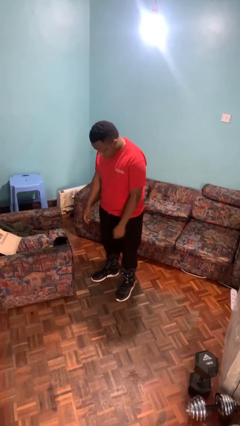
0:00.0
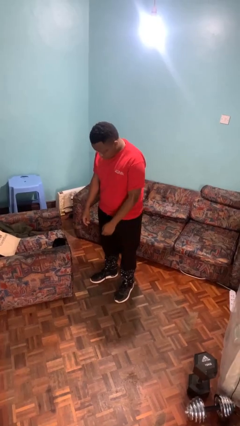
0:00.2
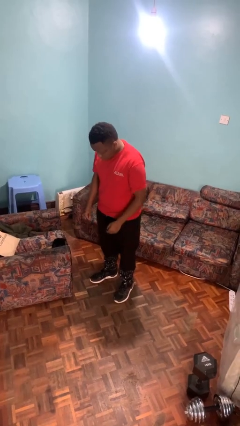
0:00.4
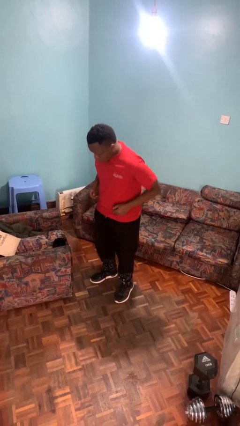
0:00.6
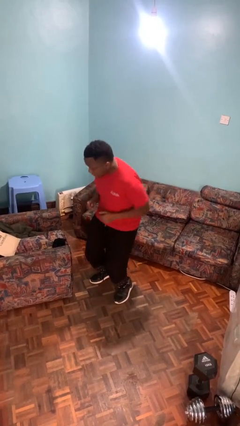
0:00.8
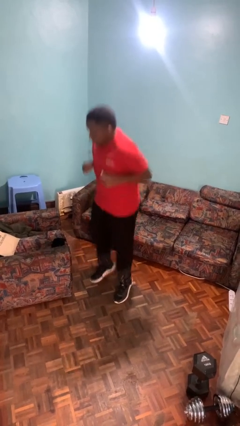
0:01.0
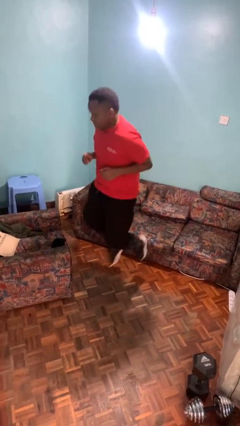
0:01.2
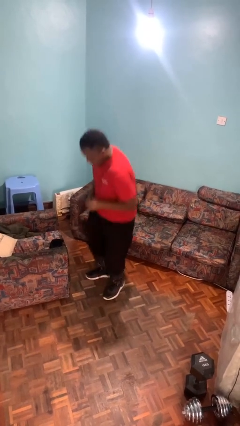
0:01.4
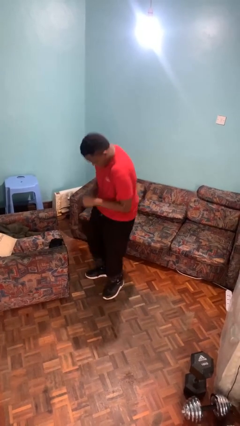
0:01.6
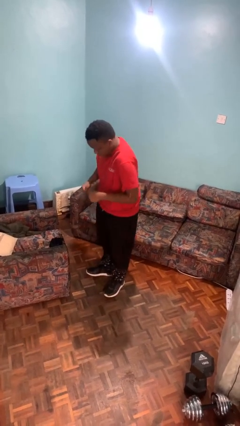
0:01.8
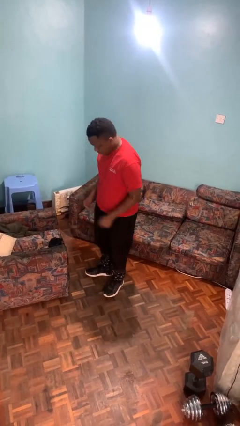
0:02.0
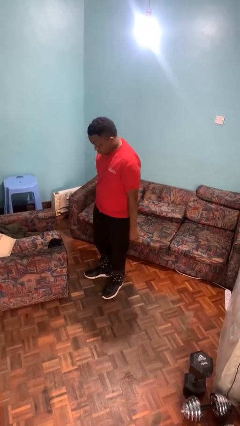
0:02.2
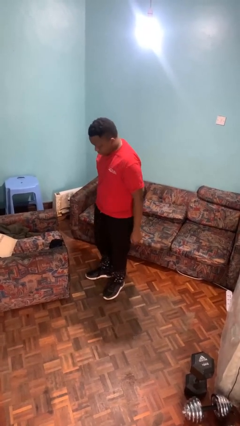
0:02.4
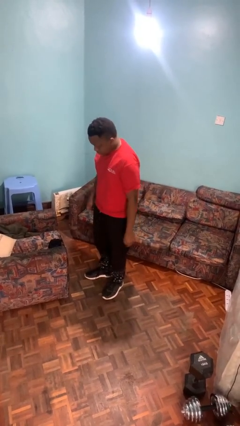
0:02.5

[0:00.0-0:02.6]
person jumps

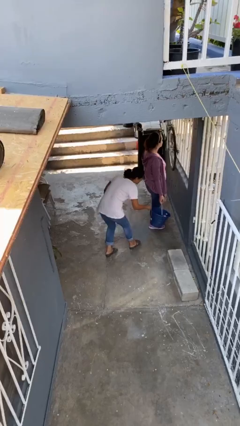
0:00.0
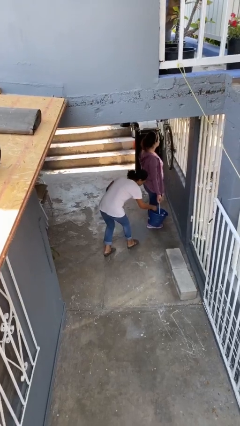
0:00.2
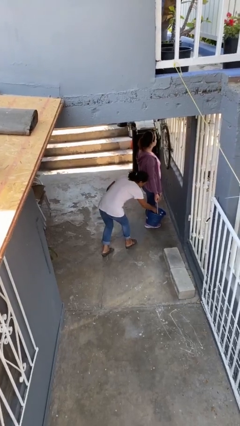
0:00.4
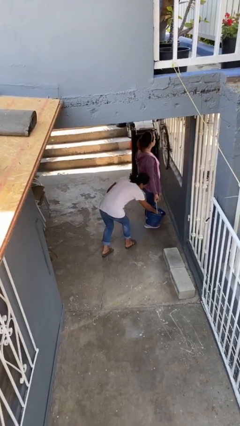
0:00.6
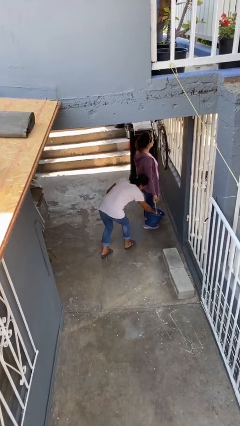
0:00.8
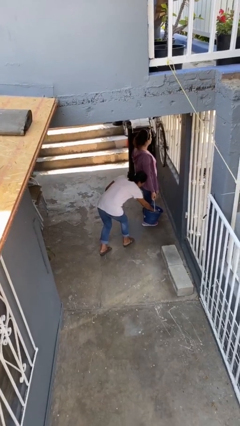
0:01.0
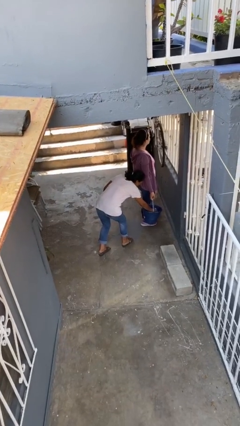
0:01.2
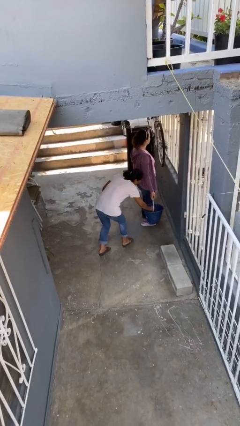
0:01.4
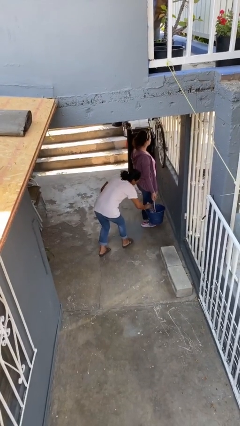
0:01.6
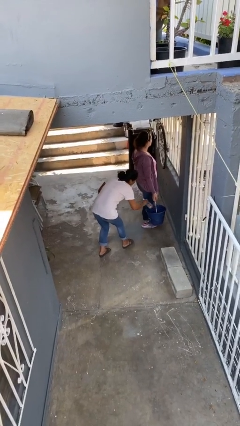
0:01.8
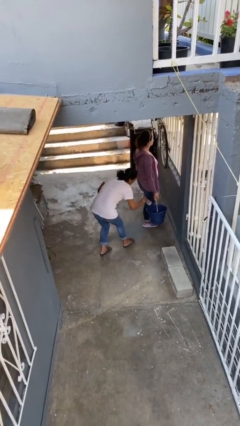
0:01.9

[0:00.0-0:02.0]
person steals object from person

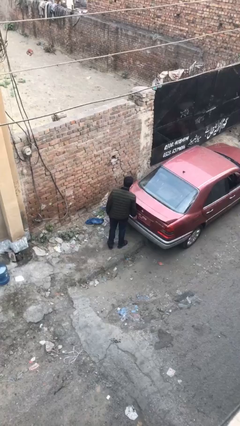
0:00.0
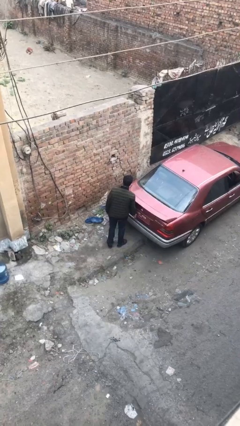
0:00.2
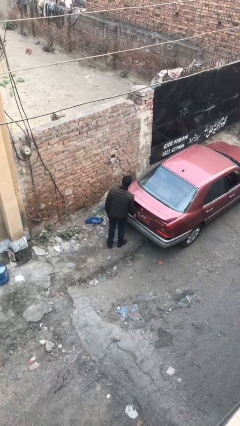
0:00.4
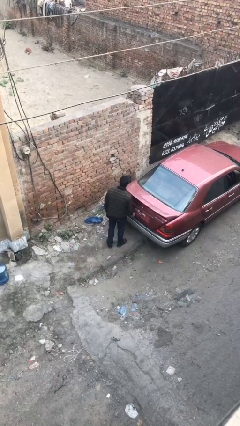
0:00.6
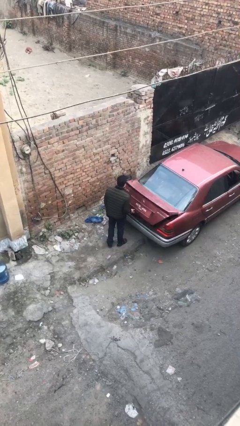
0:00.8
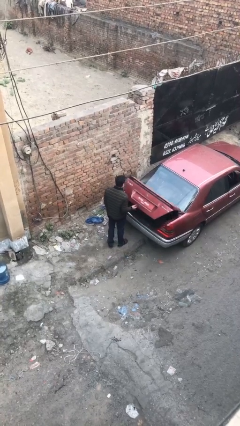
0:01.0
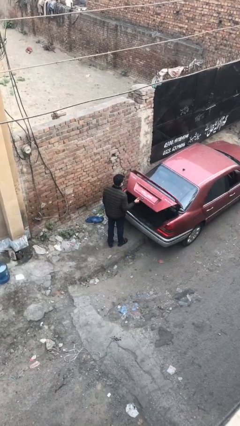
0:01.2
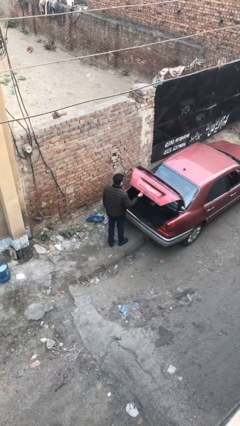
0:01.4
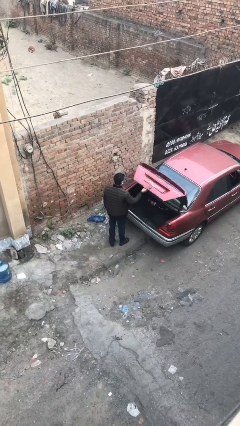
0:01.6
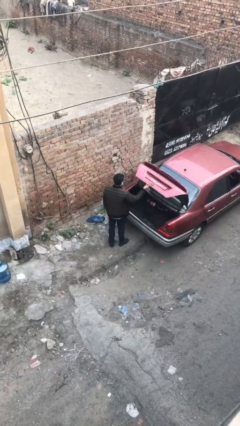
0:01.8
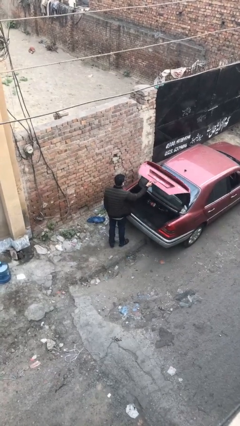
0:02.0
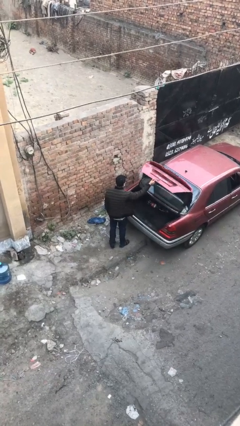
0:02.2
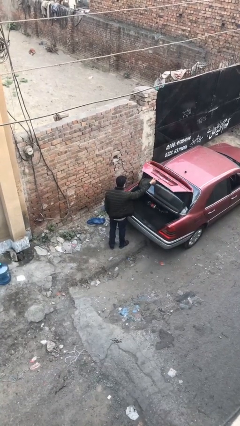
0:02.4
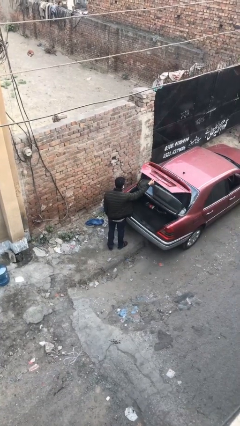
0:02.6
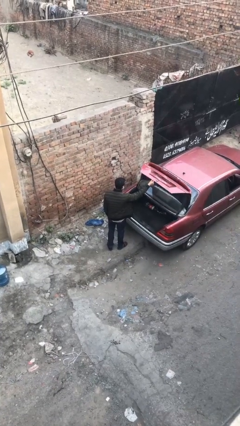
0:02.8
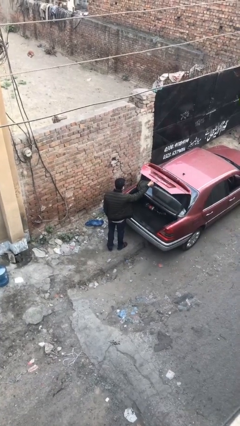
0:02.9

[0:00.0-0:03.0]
person opens car trunk

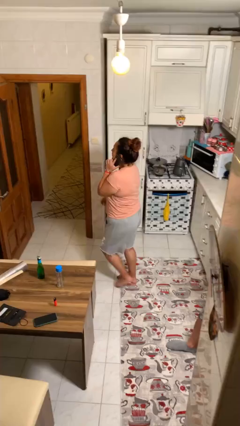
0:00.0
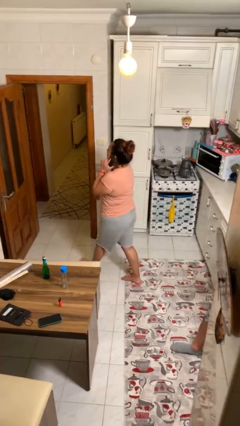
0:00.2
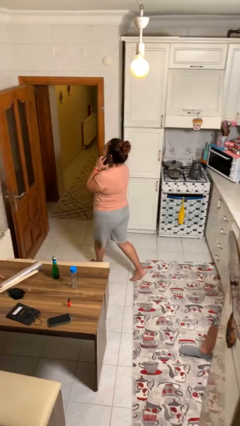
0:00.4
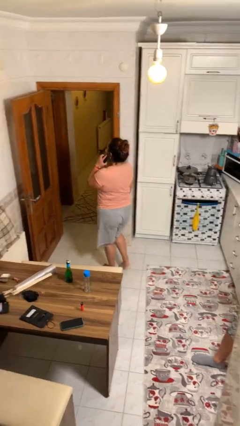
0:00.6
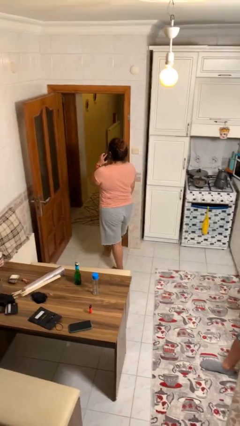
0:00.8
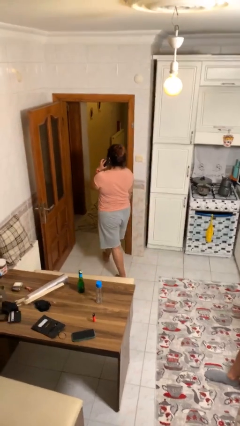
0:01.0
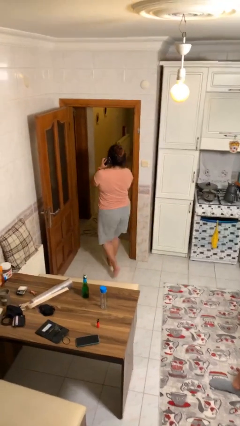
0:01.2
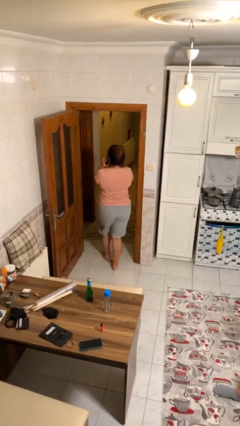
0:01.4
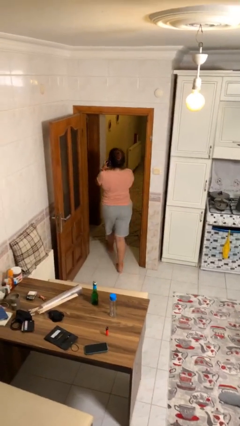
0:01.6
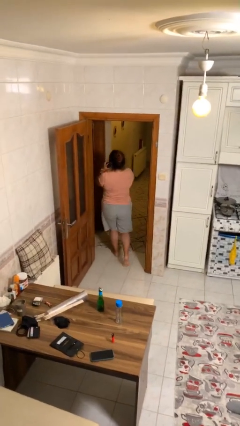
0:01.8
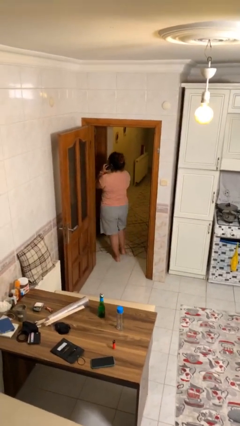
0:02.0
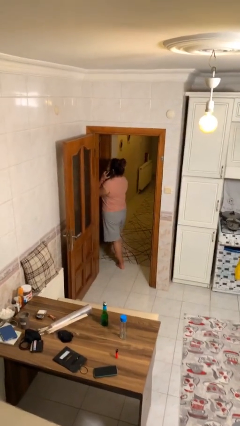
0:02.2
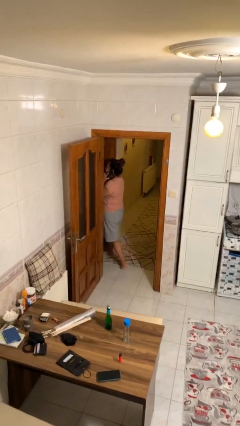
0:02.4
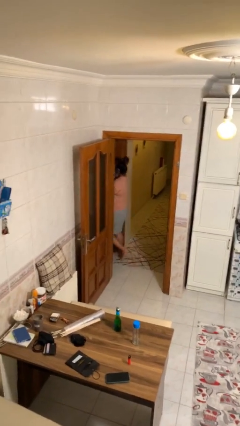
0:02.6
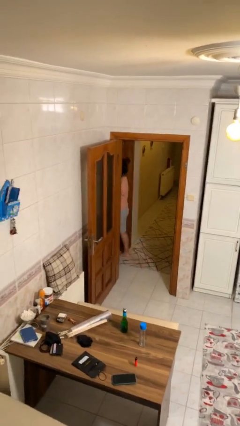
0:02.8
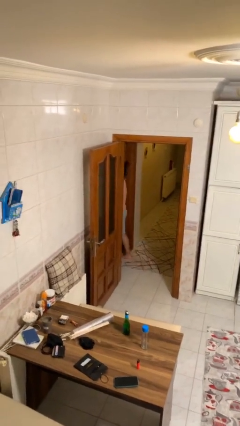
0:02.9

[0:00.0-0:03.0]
person exits scene through structure

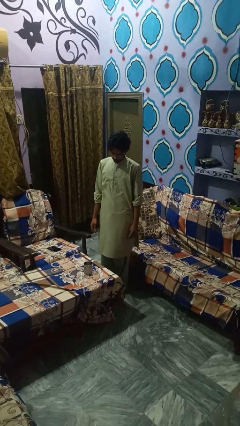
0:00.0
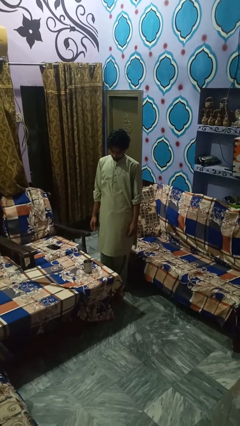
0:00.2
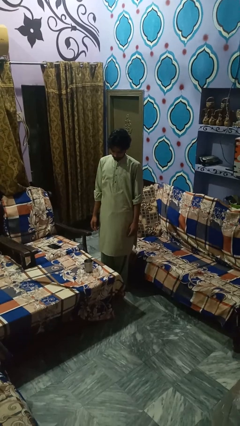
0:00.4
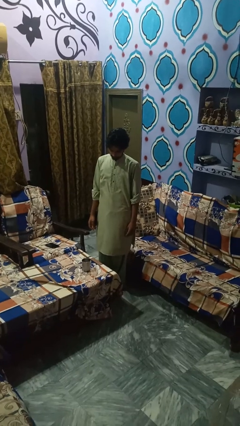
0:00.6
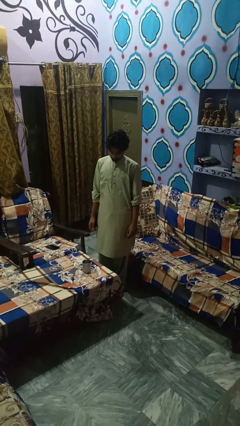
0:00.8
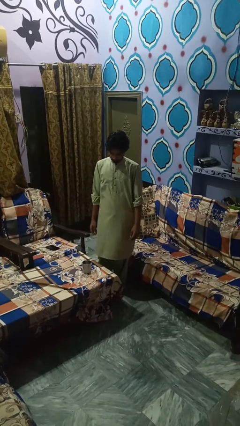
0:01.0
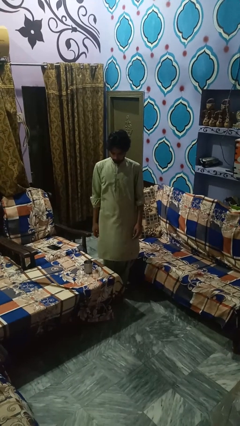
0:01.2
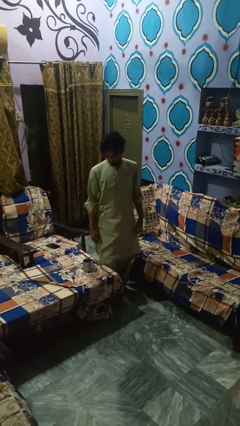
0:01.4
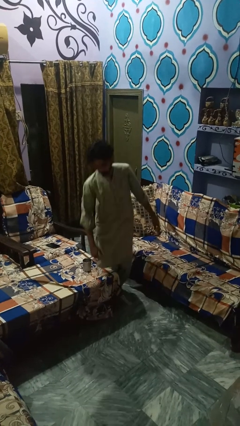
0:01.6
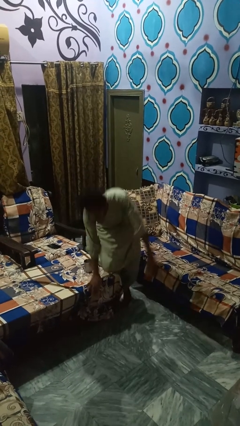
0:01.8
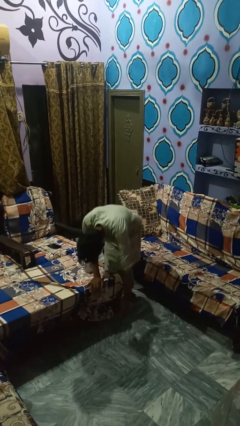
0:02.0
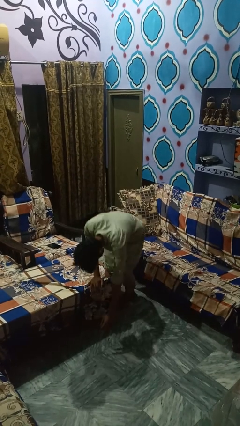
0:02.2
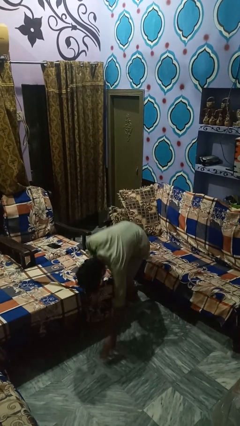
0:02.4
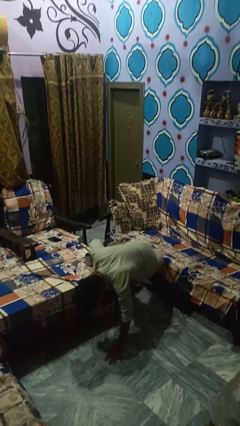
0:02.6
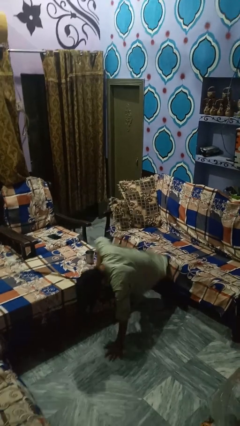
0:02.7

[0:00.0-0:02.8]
person trips on object on floor

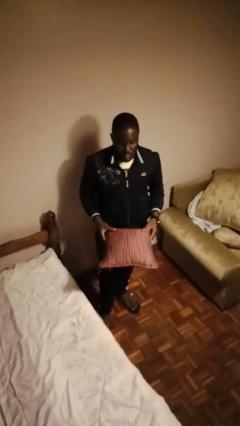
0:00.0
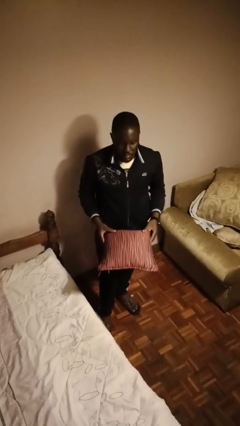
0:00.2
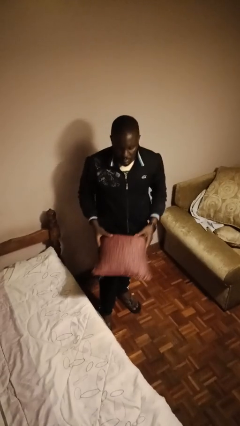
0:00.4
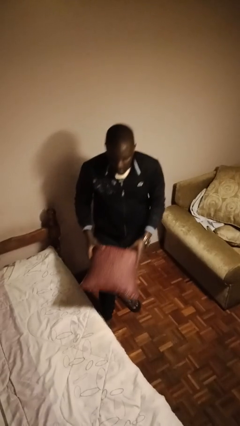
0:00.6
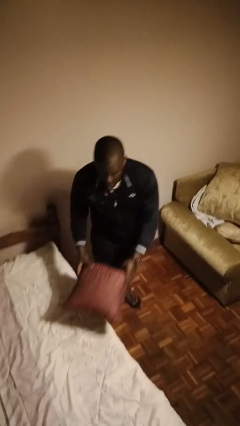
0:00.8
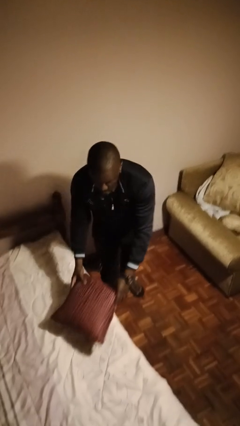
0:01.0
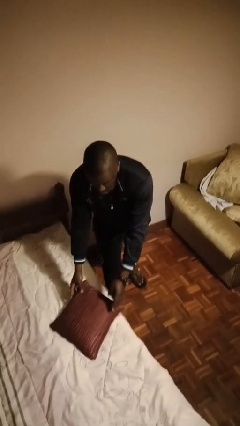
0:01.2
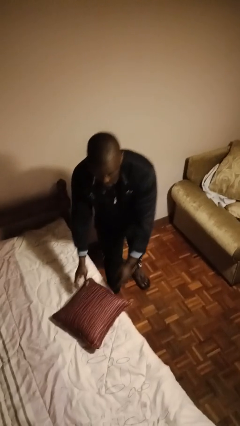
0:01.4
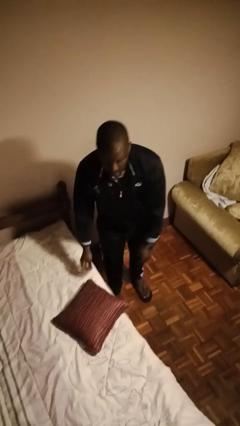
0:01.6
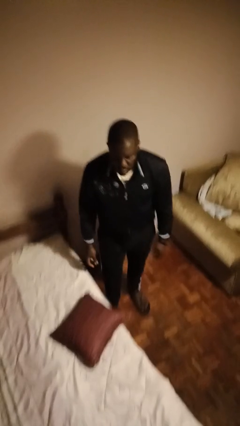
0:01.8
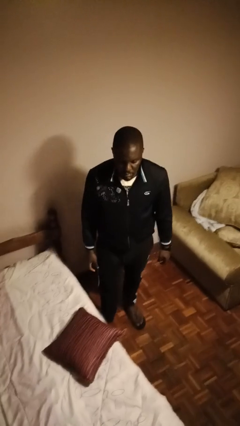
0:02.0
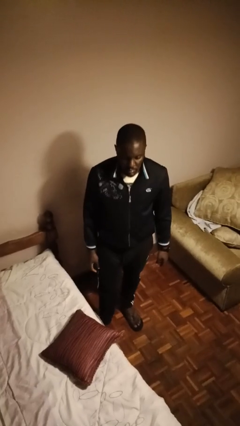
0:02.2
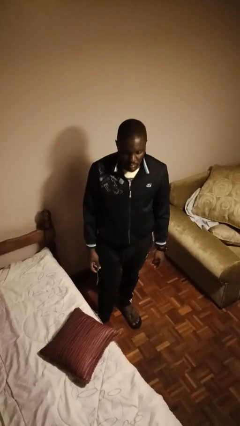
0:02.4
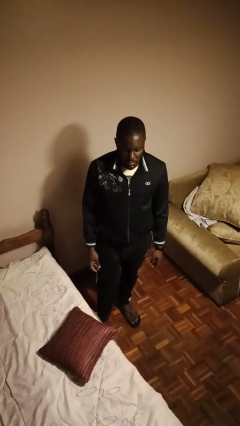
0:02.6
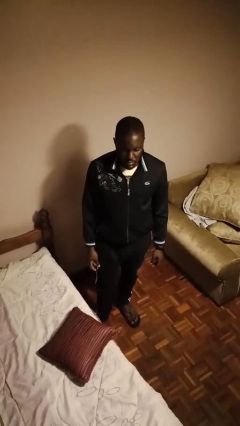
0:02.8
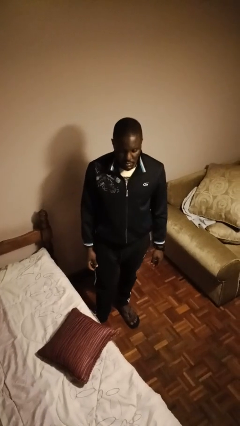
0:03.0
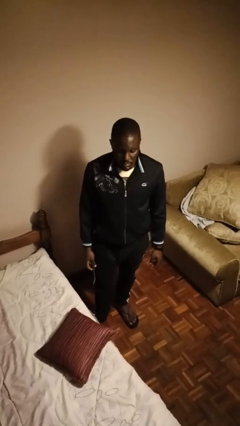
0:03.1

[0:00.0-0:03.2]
person puts down object on bed

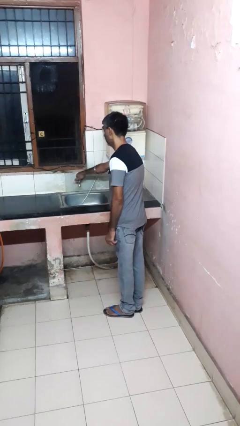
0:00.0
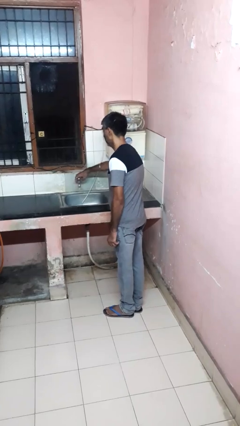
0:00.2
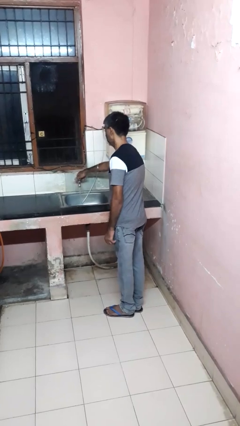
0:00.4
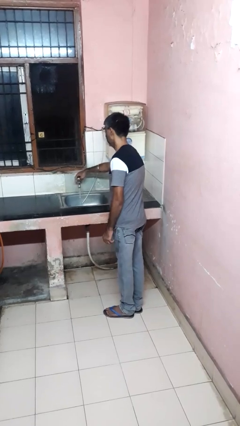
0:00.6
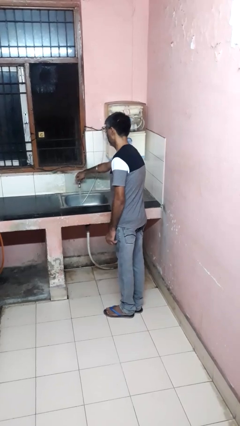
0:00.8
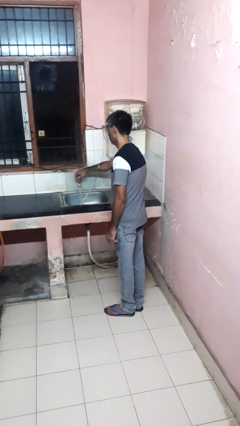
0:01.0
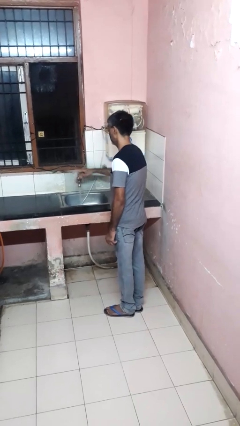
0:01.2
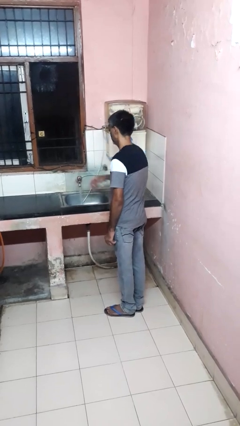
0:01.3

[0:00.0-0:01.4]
person turns on faucet
